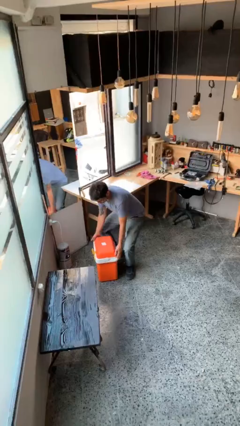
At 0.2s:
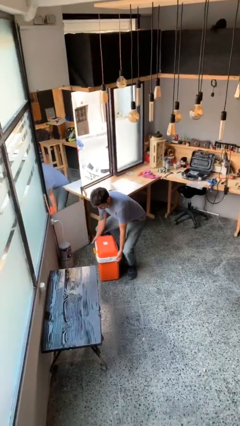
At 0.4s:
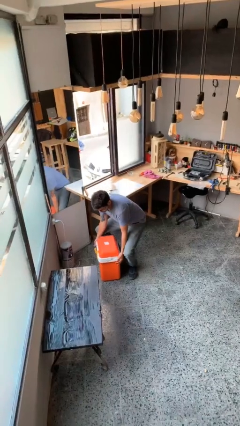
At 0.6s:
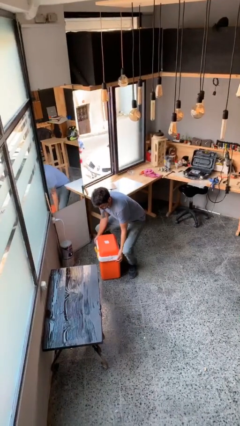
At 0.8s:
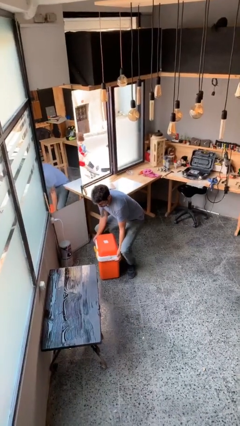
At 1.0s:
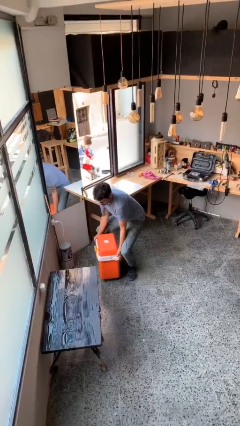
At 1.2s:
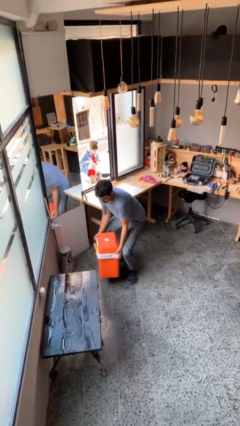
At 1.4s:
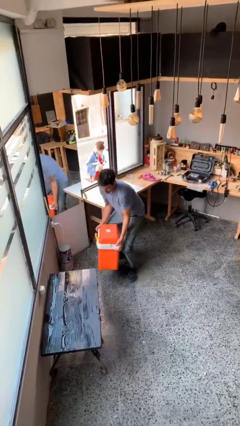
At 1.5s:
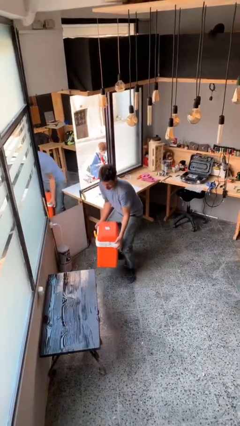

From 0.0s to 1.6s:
person picks up object from floor

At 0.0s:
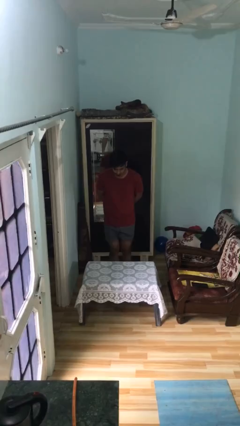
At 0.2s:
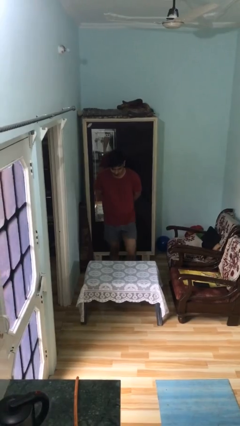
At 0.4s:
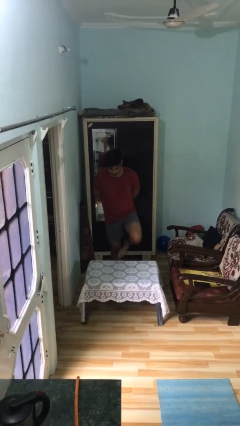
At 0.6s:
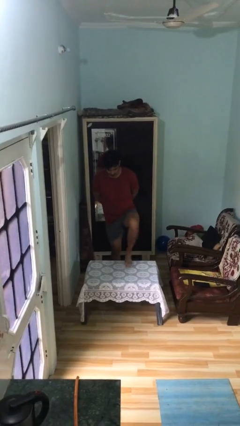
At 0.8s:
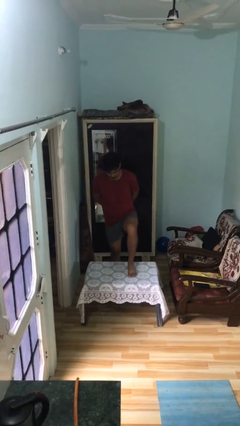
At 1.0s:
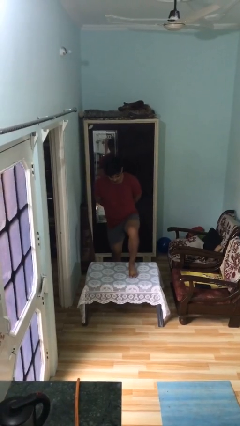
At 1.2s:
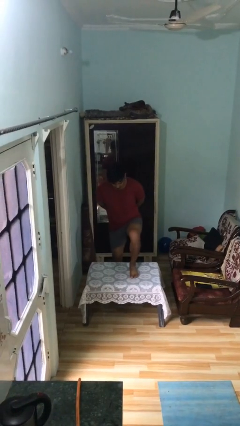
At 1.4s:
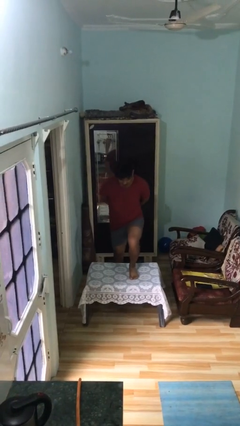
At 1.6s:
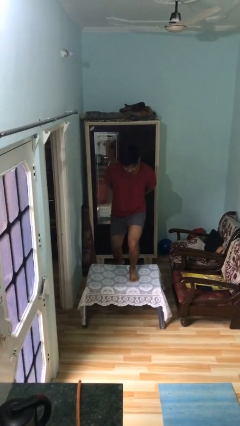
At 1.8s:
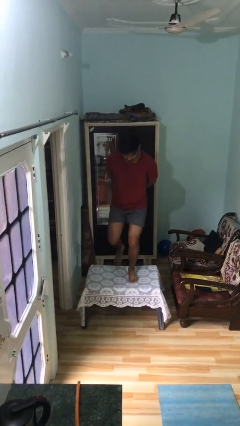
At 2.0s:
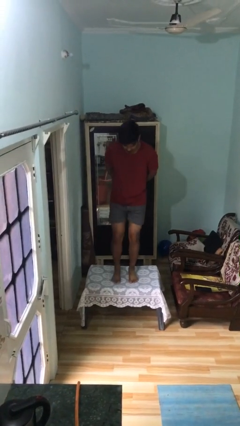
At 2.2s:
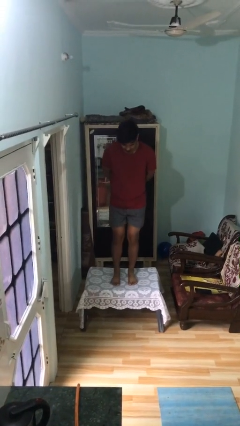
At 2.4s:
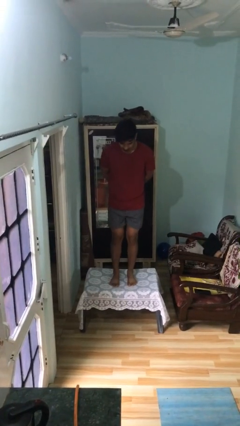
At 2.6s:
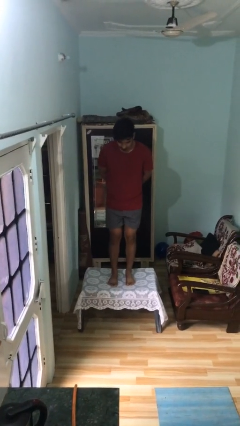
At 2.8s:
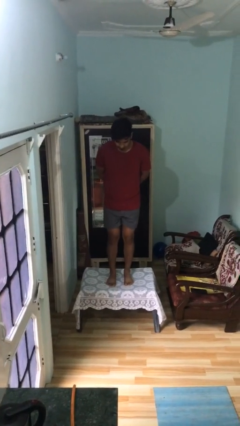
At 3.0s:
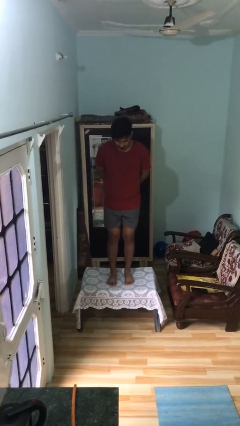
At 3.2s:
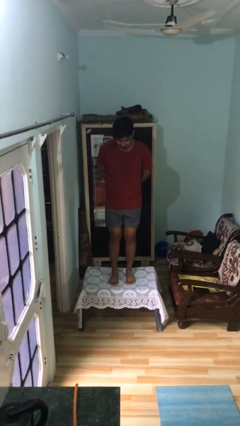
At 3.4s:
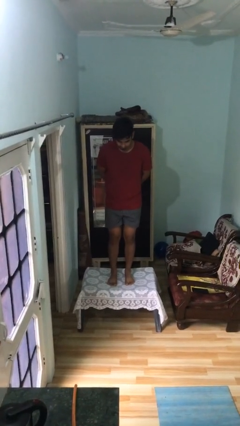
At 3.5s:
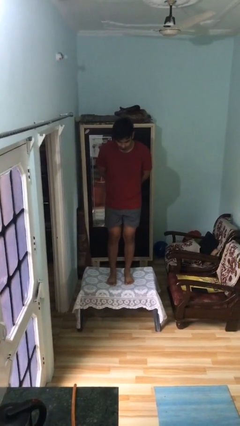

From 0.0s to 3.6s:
person climbs on table

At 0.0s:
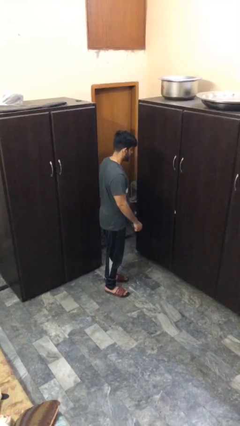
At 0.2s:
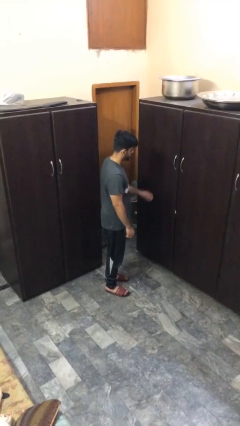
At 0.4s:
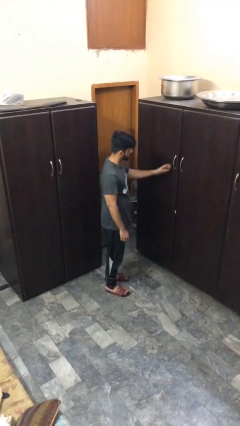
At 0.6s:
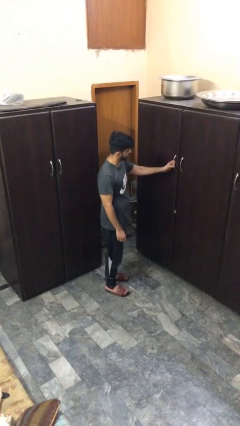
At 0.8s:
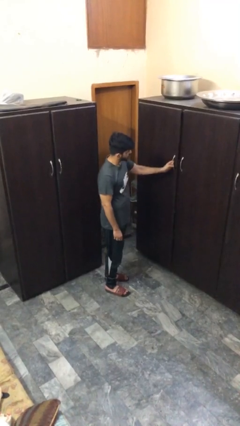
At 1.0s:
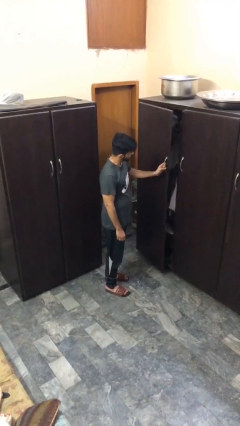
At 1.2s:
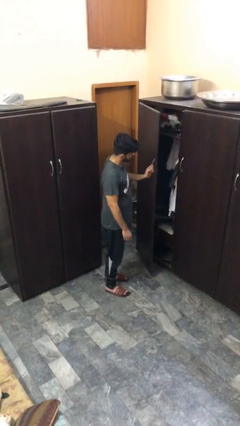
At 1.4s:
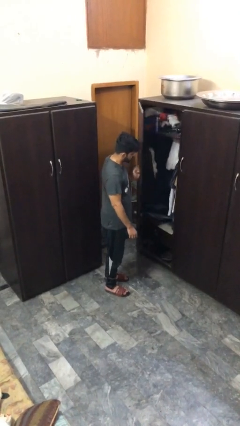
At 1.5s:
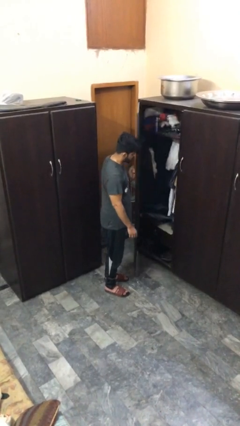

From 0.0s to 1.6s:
person opens dresser drawer

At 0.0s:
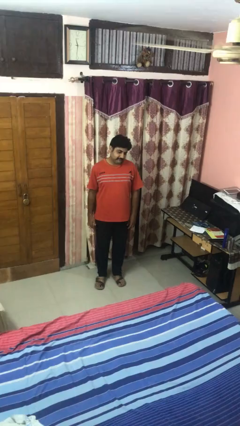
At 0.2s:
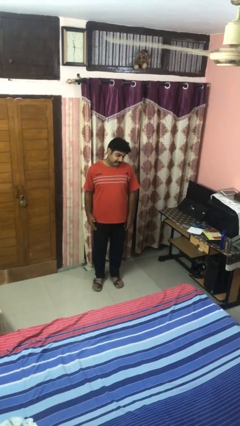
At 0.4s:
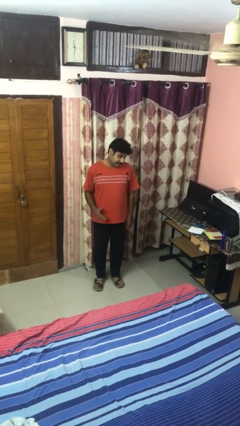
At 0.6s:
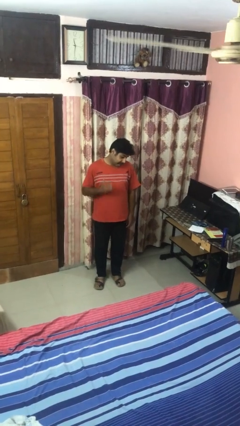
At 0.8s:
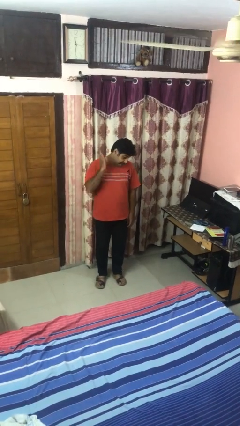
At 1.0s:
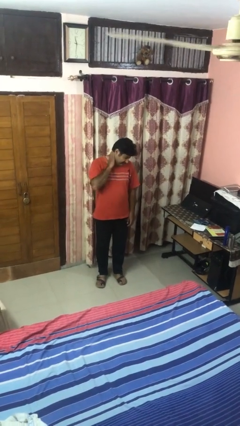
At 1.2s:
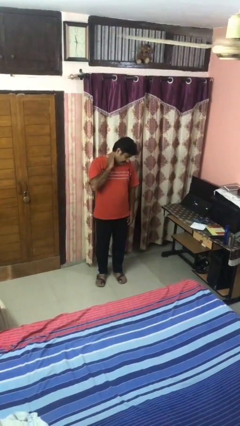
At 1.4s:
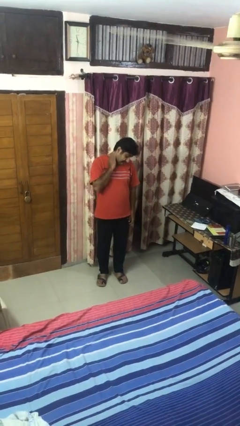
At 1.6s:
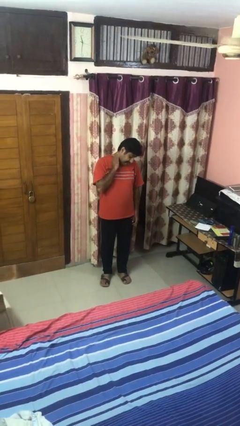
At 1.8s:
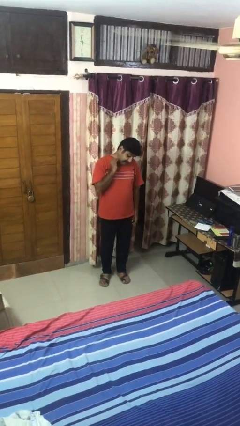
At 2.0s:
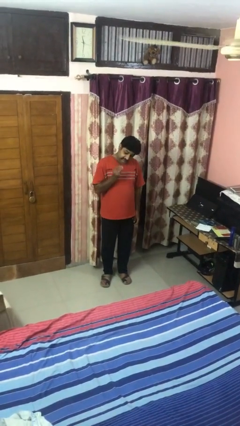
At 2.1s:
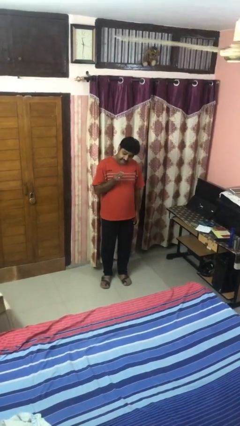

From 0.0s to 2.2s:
person swats bug

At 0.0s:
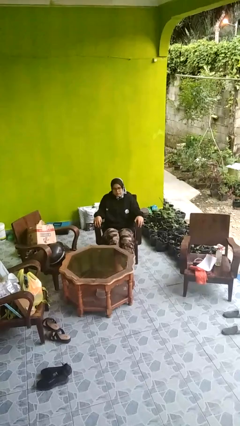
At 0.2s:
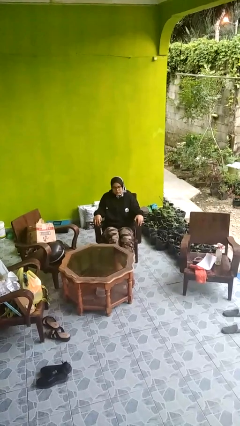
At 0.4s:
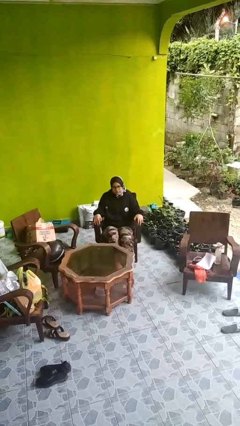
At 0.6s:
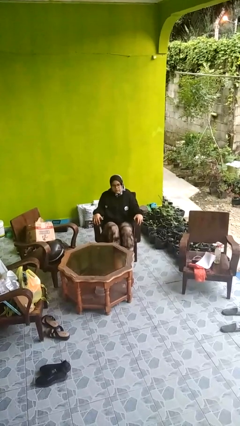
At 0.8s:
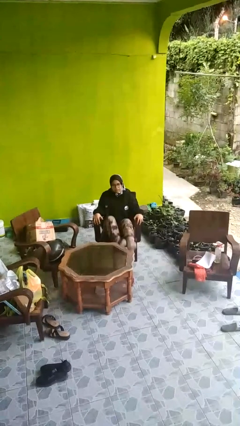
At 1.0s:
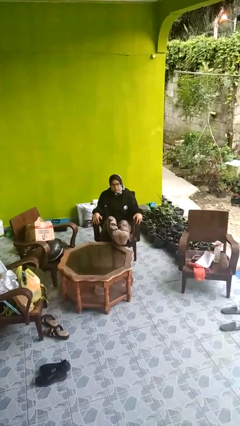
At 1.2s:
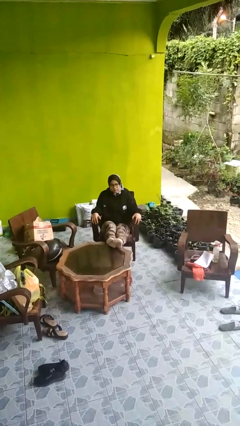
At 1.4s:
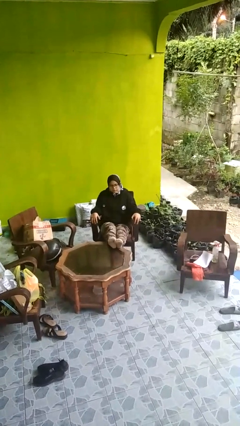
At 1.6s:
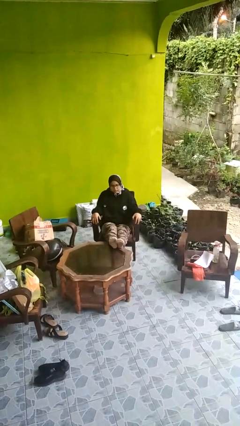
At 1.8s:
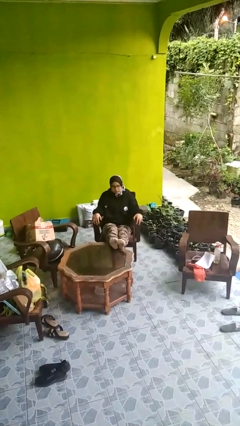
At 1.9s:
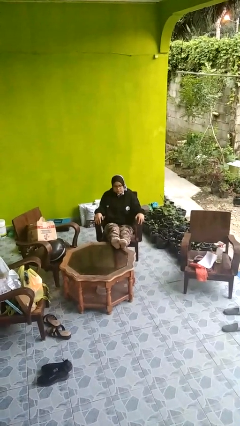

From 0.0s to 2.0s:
person puts feet up

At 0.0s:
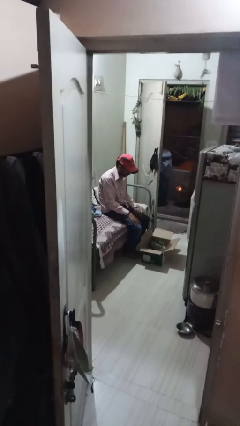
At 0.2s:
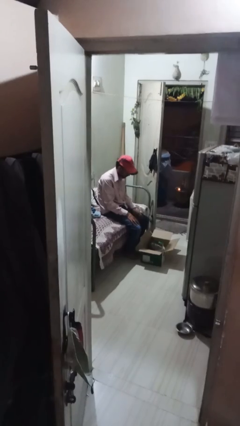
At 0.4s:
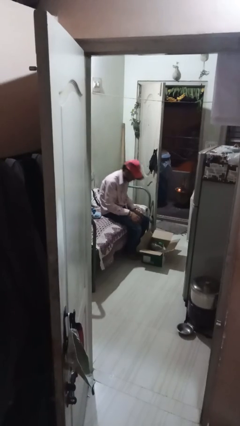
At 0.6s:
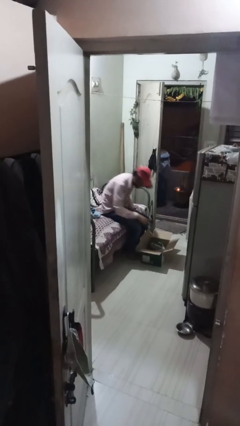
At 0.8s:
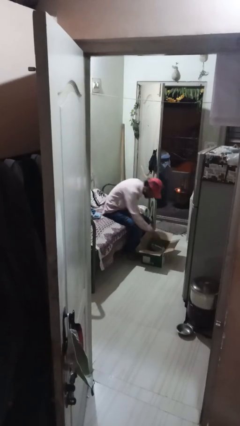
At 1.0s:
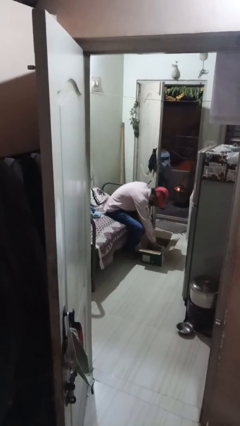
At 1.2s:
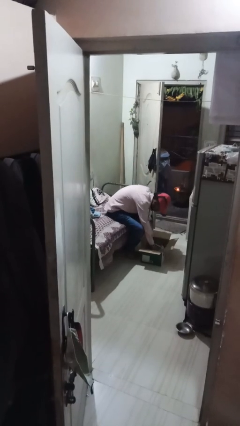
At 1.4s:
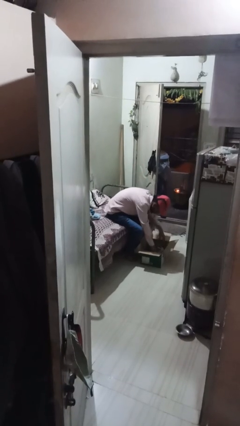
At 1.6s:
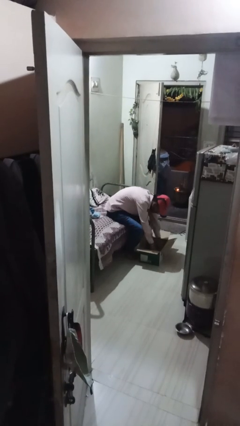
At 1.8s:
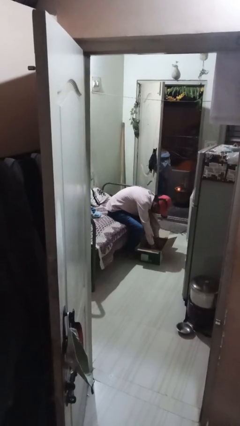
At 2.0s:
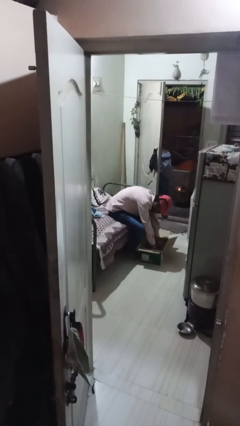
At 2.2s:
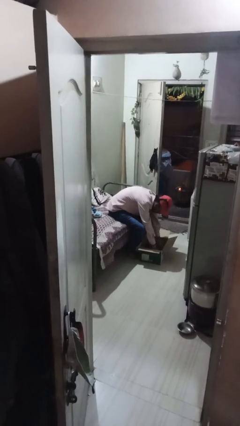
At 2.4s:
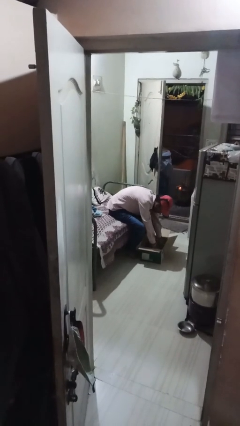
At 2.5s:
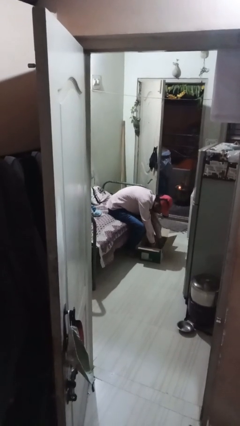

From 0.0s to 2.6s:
person searches in box

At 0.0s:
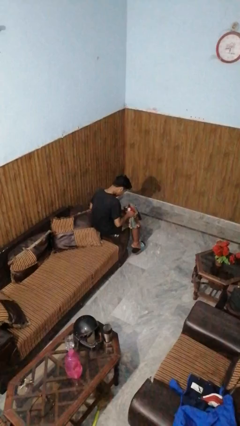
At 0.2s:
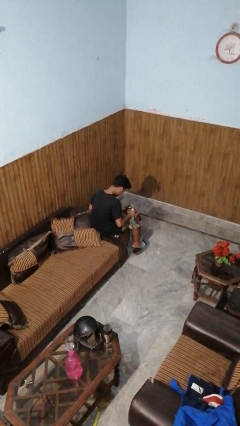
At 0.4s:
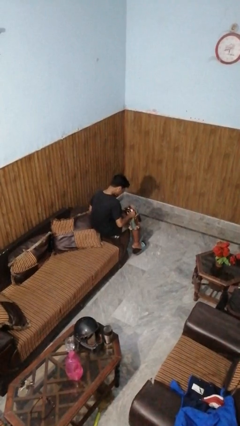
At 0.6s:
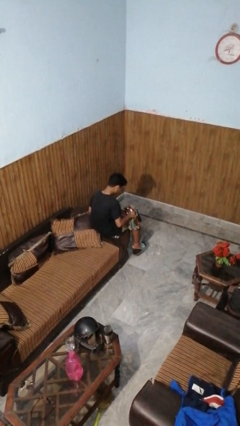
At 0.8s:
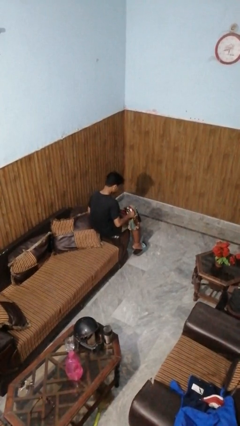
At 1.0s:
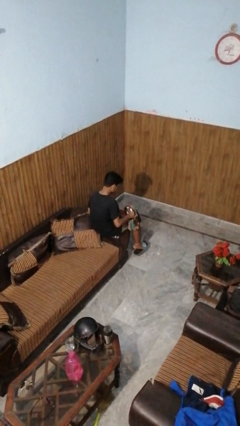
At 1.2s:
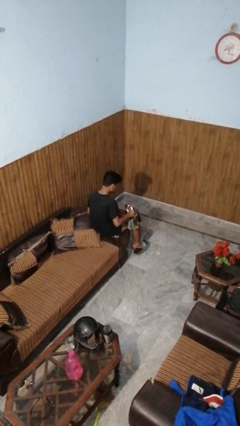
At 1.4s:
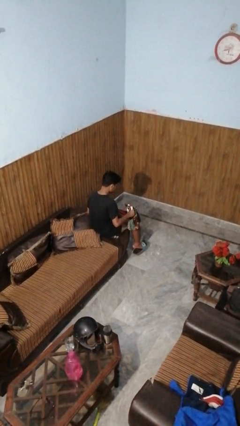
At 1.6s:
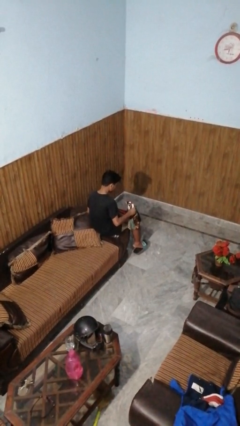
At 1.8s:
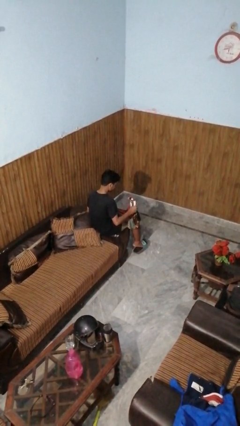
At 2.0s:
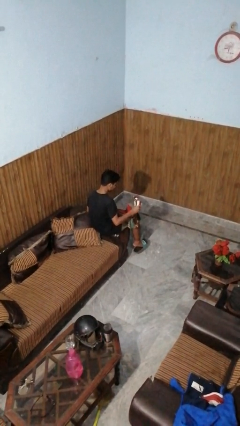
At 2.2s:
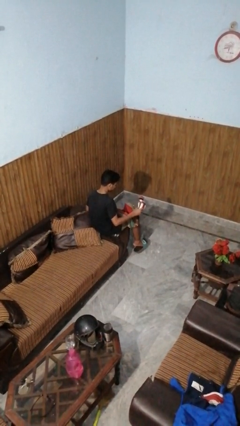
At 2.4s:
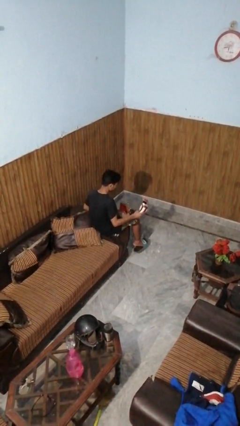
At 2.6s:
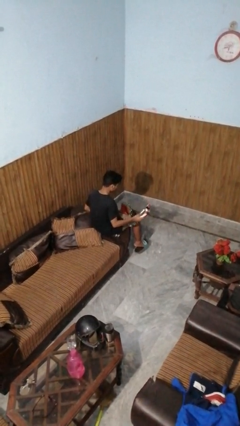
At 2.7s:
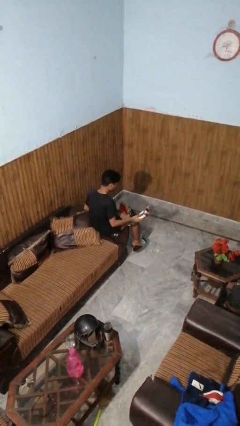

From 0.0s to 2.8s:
person takes object from purse

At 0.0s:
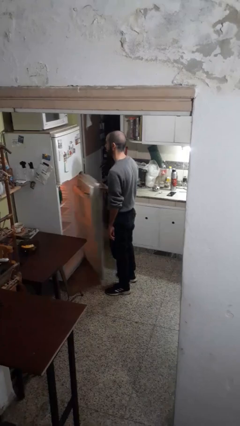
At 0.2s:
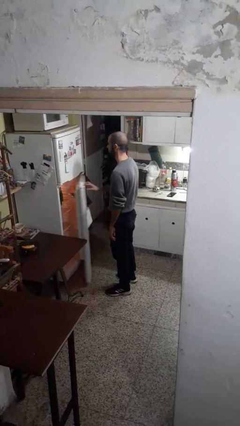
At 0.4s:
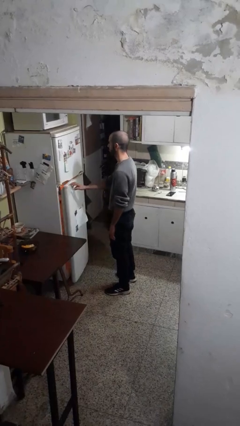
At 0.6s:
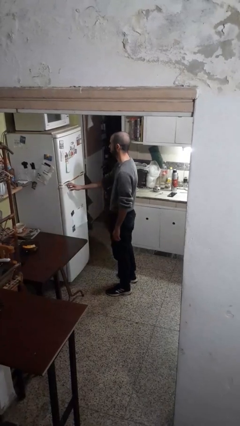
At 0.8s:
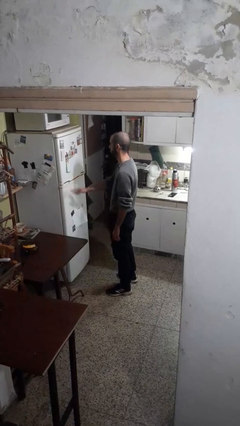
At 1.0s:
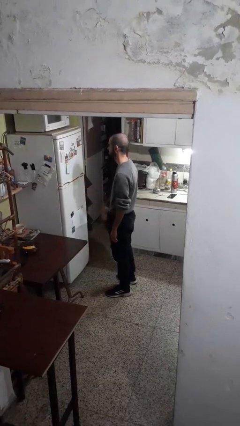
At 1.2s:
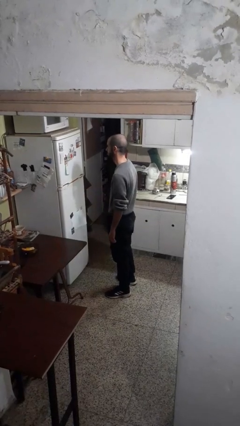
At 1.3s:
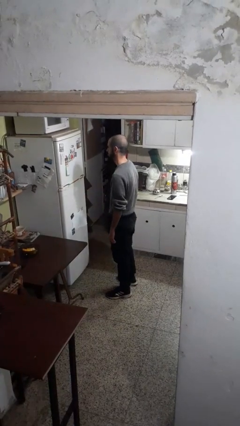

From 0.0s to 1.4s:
person closes refrigerator
